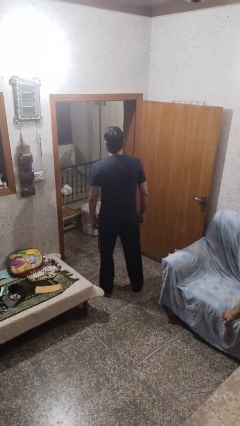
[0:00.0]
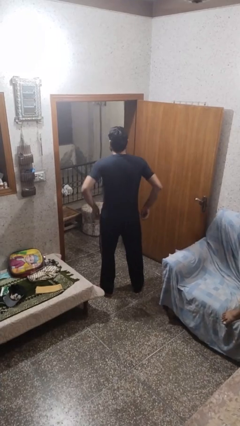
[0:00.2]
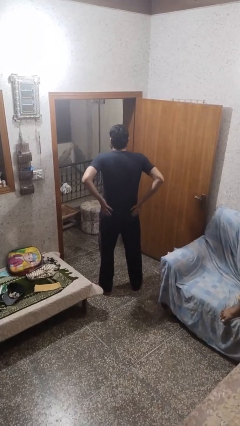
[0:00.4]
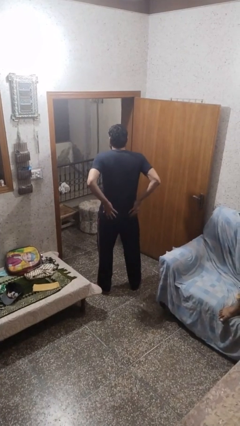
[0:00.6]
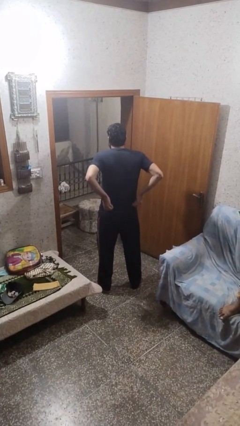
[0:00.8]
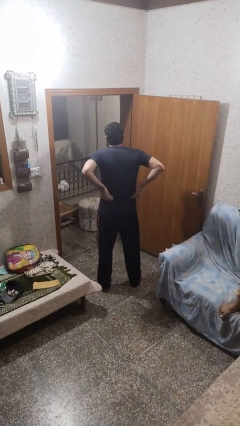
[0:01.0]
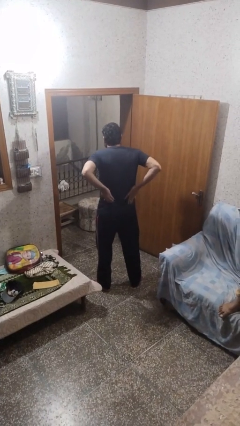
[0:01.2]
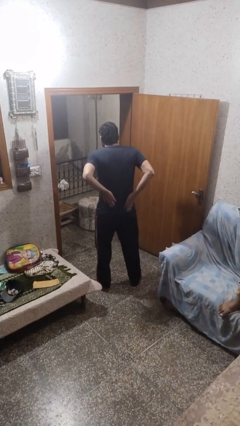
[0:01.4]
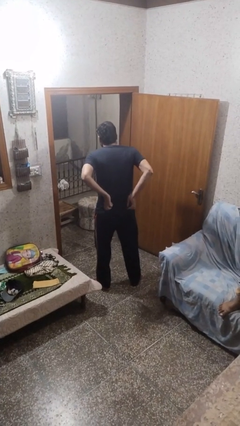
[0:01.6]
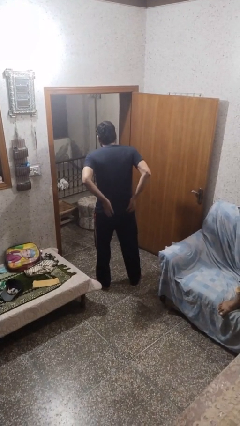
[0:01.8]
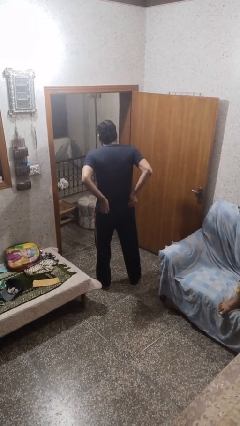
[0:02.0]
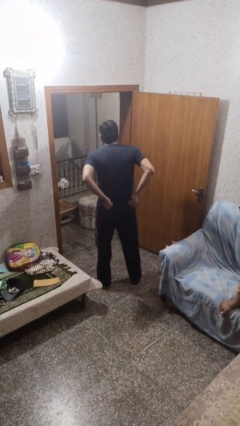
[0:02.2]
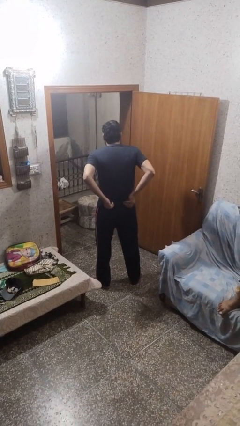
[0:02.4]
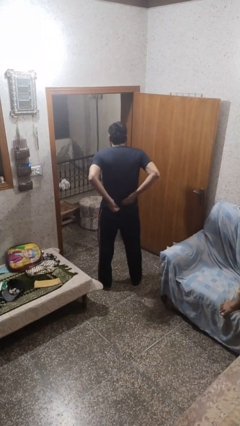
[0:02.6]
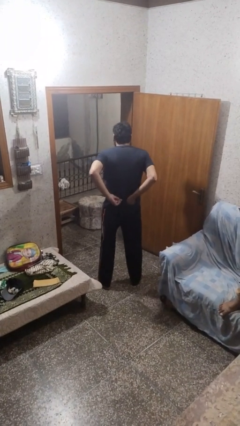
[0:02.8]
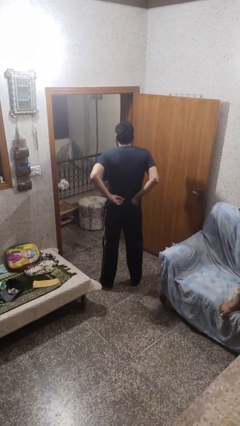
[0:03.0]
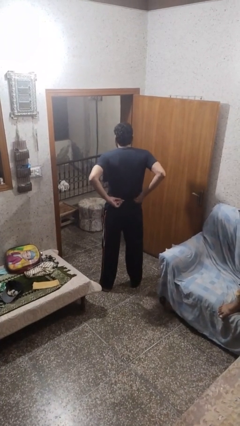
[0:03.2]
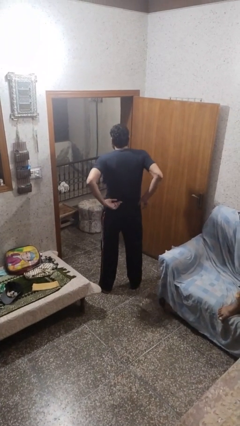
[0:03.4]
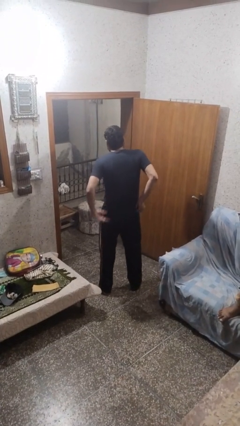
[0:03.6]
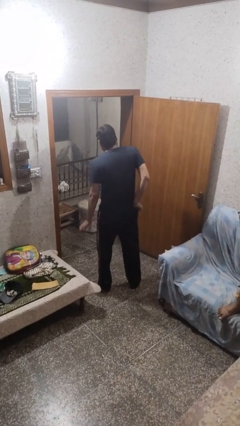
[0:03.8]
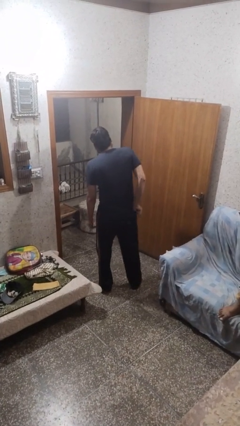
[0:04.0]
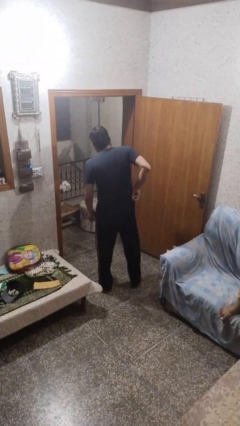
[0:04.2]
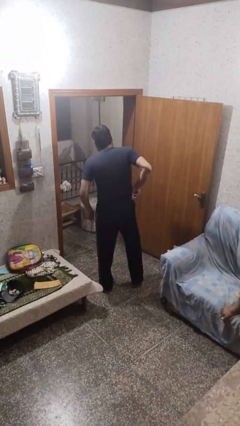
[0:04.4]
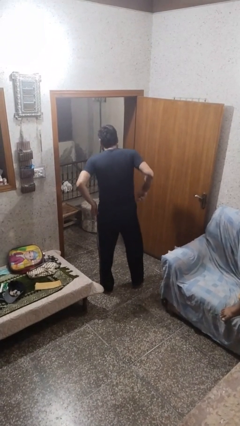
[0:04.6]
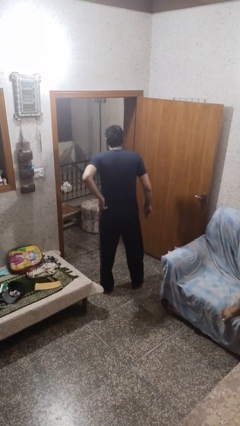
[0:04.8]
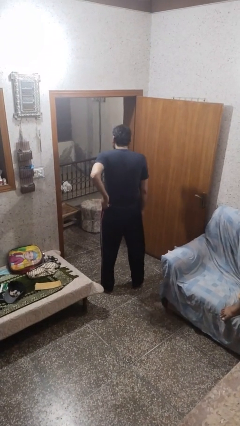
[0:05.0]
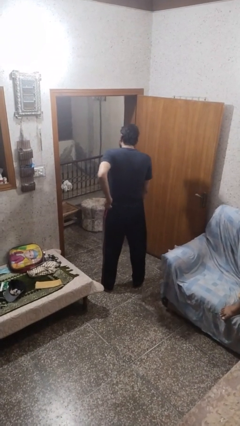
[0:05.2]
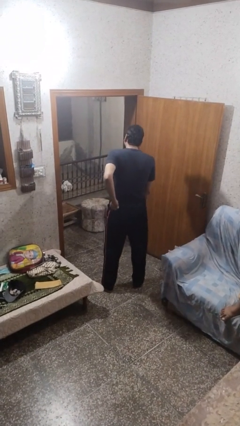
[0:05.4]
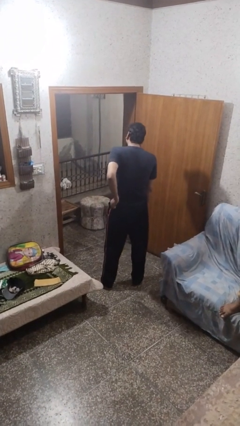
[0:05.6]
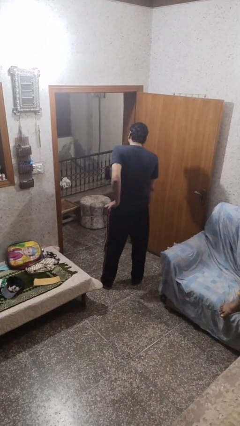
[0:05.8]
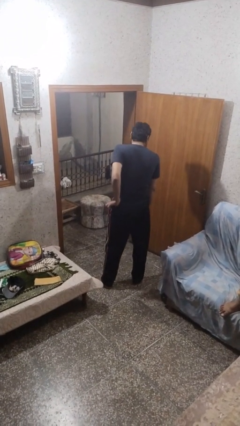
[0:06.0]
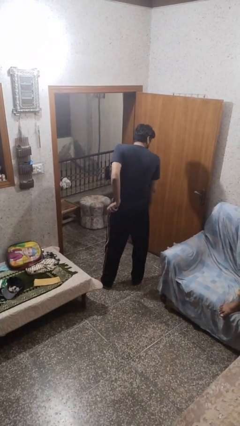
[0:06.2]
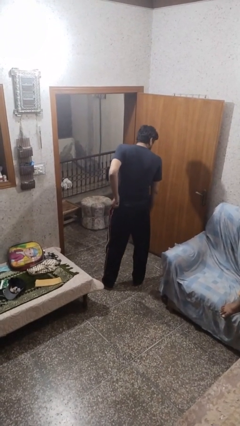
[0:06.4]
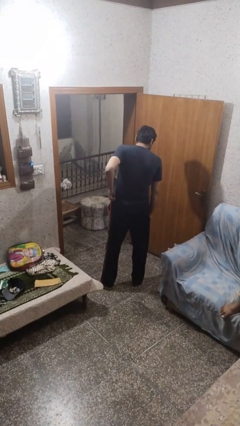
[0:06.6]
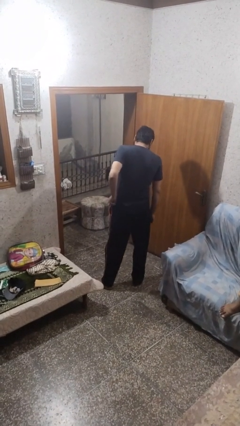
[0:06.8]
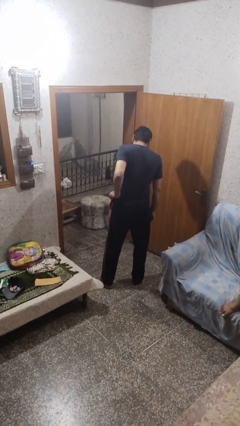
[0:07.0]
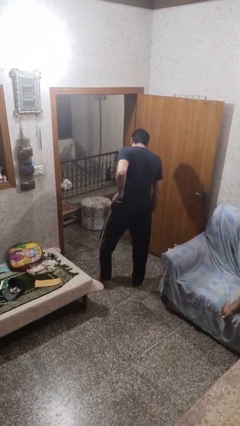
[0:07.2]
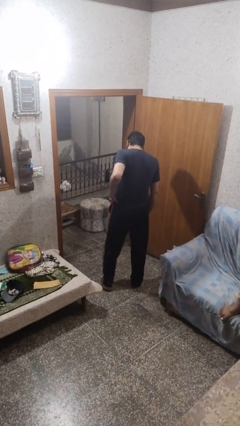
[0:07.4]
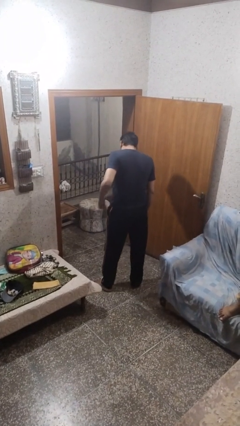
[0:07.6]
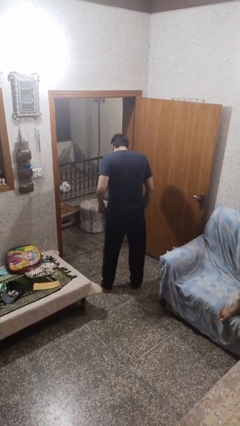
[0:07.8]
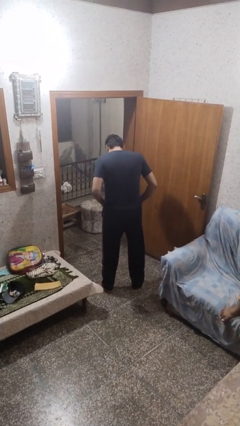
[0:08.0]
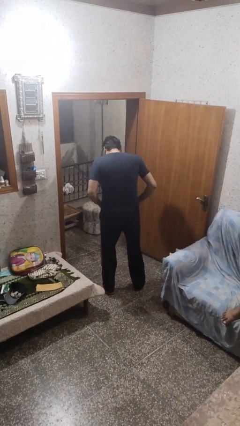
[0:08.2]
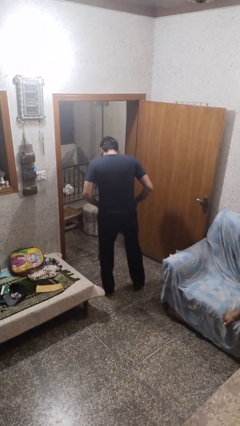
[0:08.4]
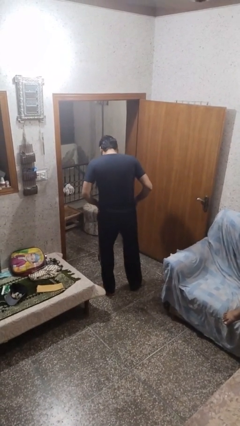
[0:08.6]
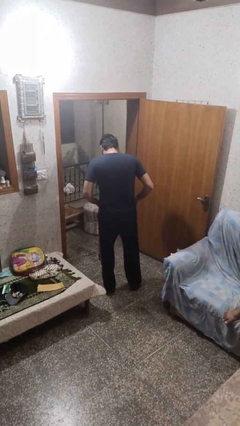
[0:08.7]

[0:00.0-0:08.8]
person tucks in shirt

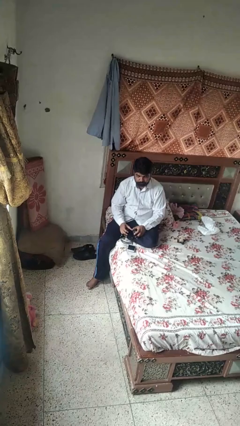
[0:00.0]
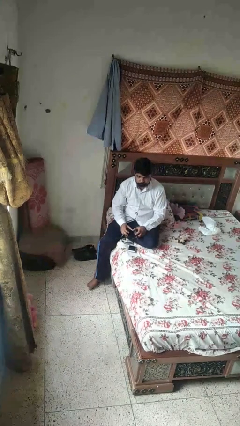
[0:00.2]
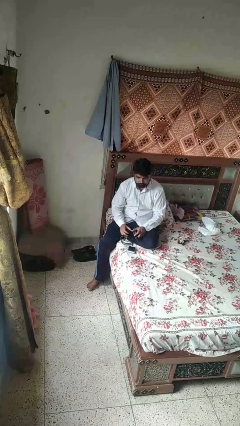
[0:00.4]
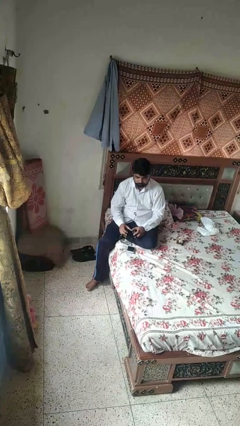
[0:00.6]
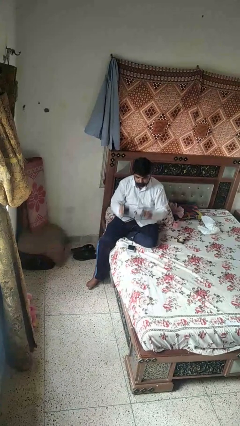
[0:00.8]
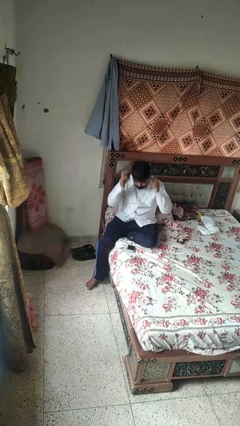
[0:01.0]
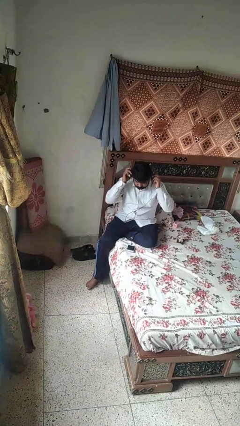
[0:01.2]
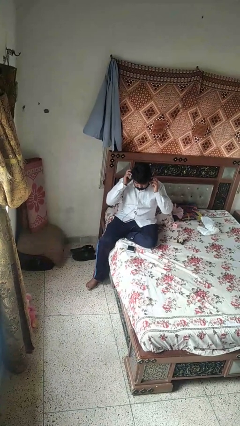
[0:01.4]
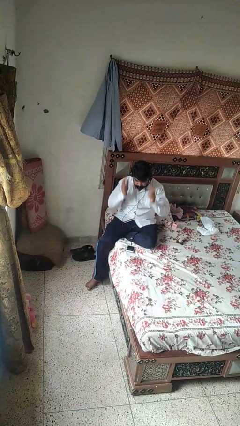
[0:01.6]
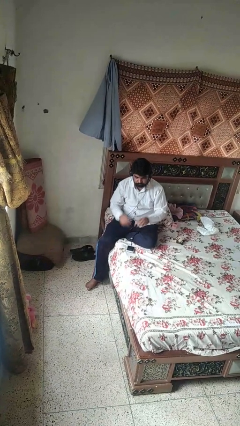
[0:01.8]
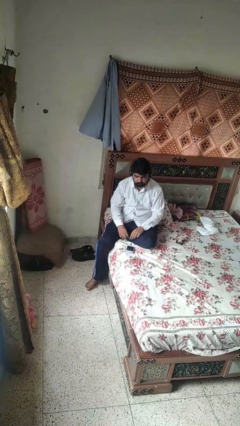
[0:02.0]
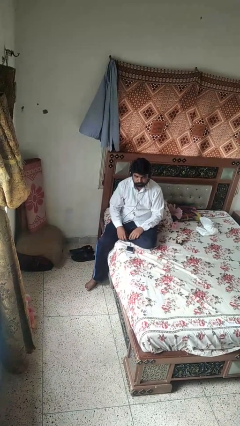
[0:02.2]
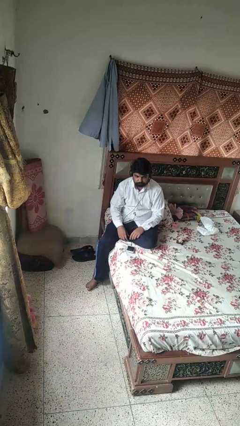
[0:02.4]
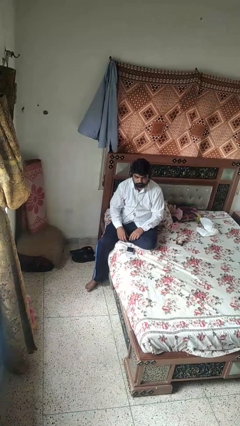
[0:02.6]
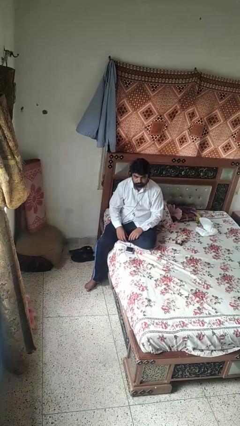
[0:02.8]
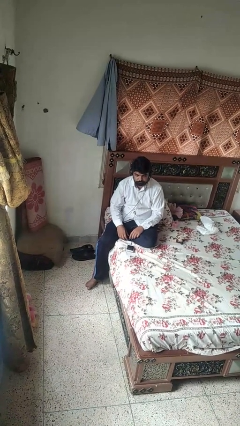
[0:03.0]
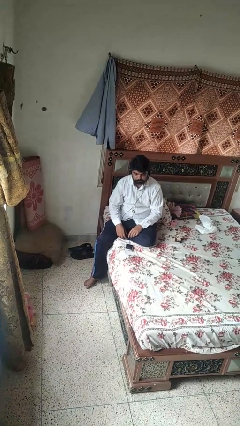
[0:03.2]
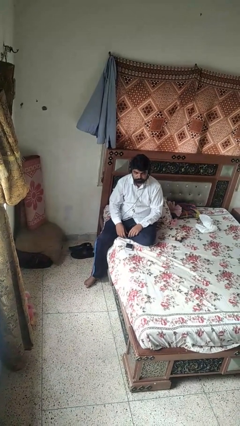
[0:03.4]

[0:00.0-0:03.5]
person puts on headphones

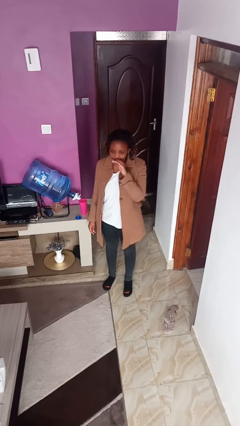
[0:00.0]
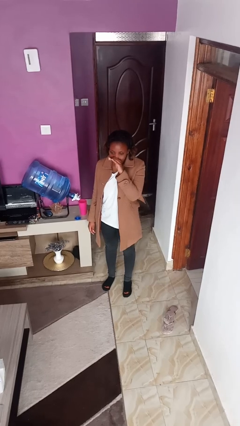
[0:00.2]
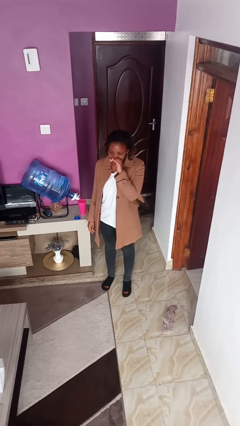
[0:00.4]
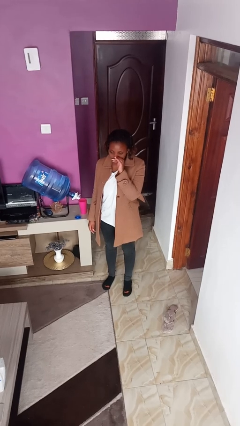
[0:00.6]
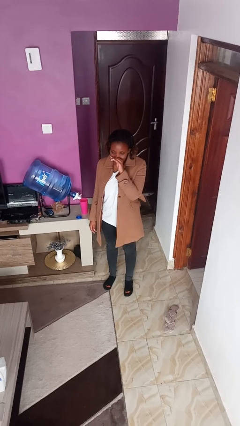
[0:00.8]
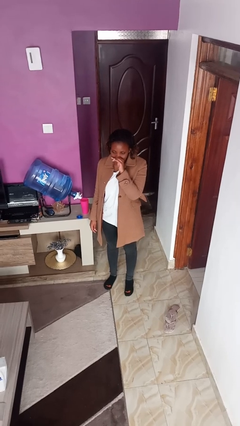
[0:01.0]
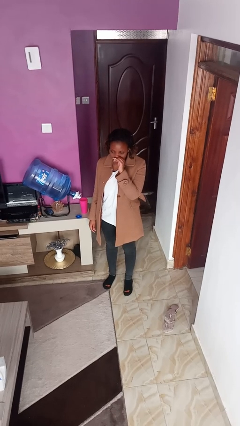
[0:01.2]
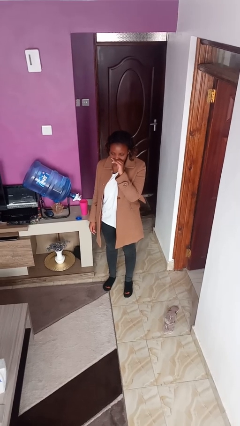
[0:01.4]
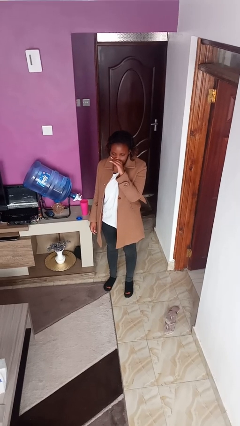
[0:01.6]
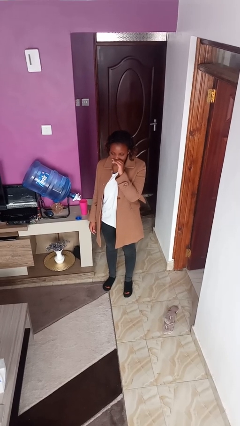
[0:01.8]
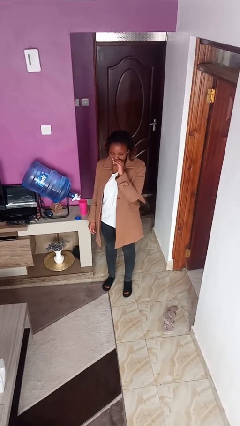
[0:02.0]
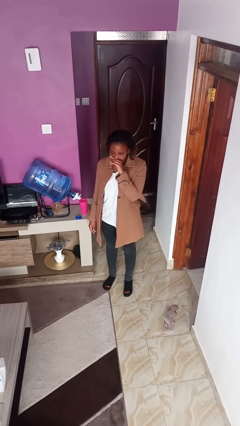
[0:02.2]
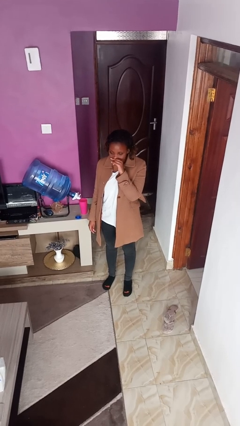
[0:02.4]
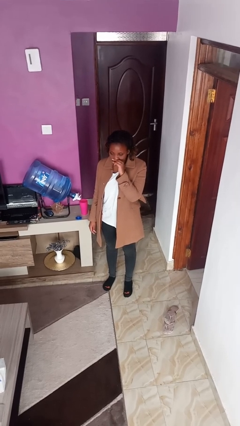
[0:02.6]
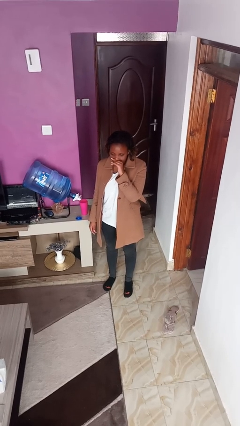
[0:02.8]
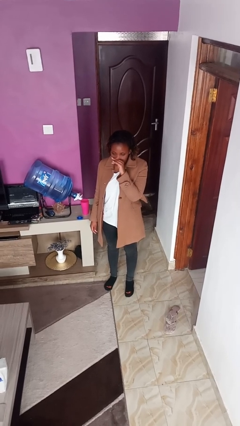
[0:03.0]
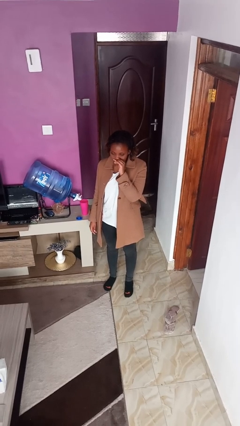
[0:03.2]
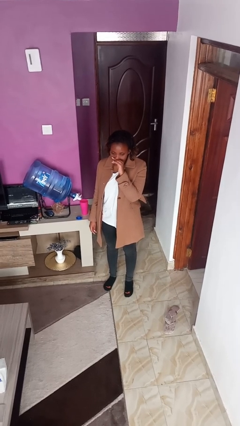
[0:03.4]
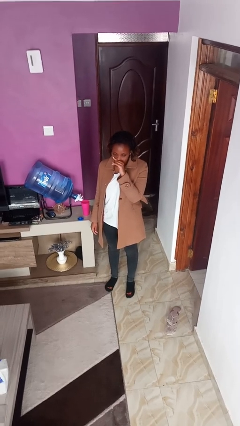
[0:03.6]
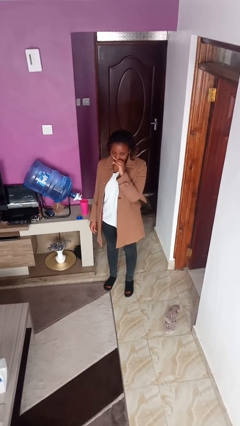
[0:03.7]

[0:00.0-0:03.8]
person scratches face

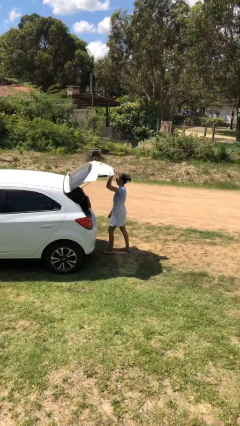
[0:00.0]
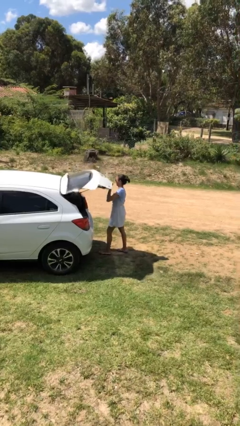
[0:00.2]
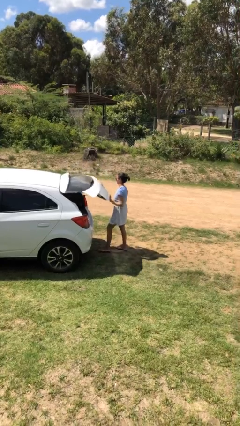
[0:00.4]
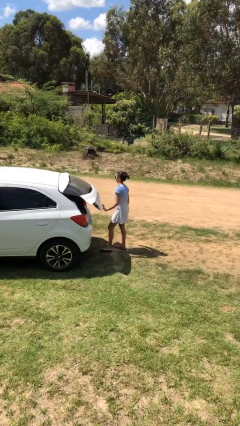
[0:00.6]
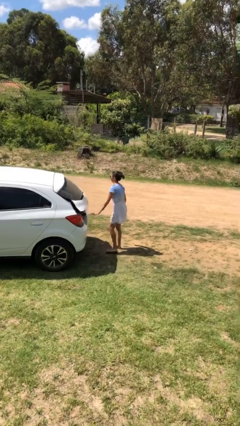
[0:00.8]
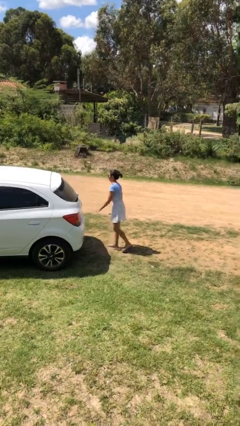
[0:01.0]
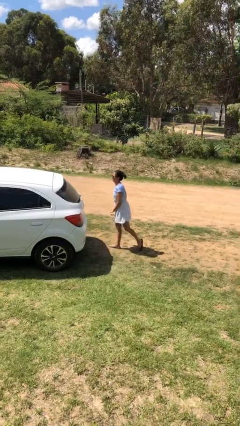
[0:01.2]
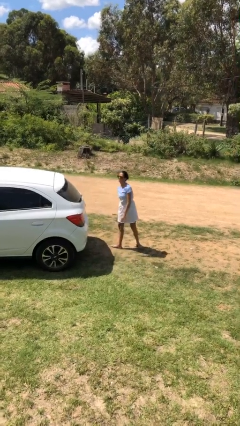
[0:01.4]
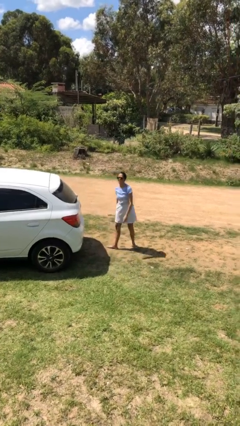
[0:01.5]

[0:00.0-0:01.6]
person closes car trunk

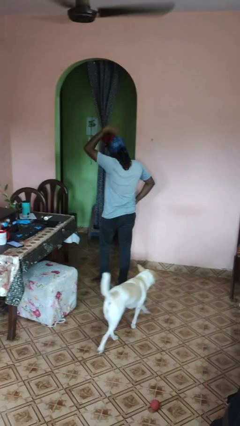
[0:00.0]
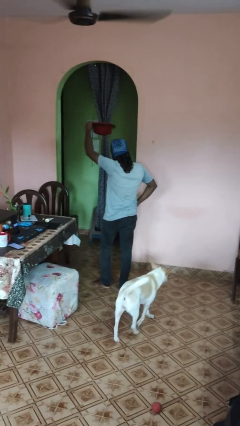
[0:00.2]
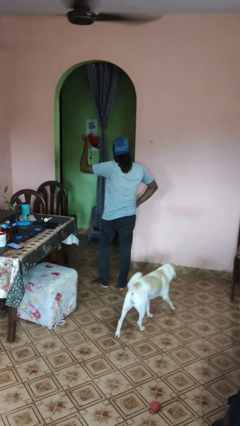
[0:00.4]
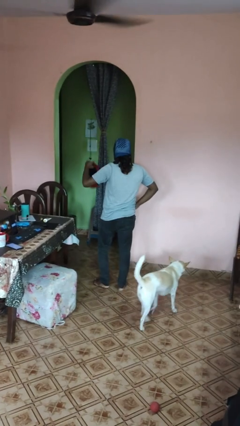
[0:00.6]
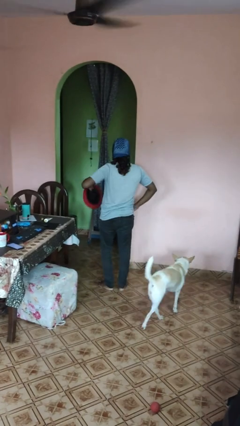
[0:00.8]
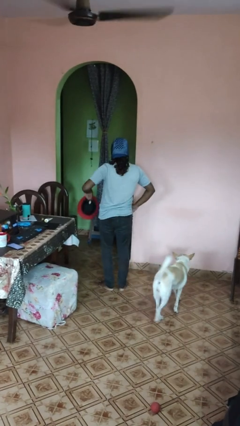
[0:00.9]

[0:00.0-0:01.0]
person takes off hat
